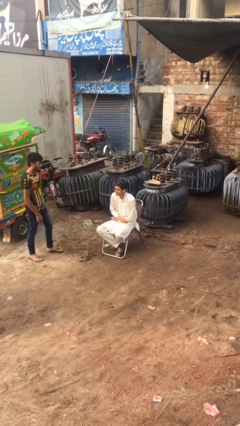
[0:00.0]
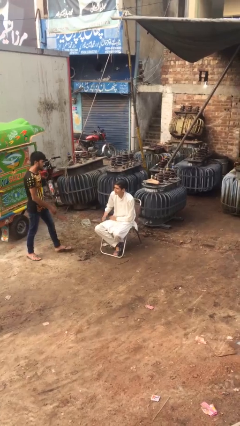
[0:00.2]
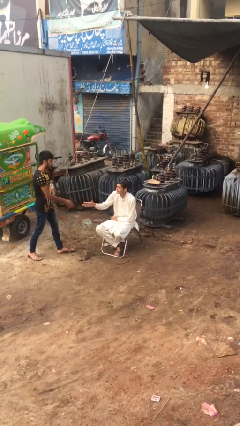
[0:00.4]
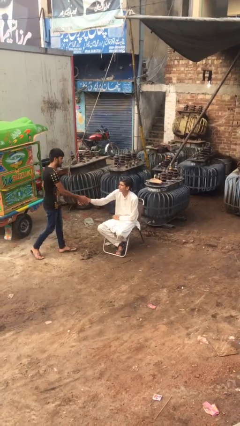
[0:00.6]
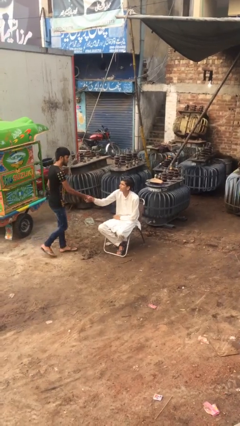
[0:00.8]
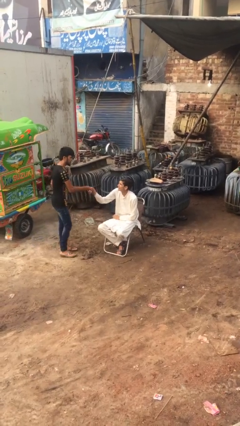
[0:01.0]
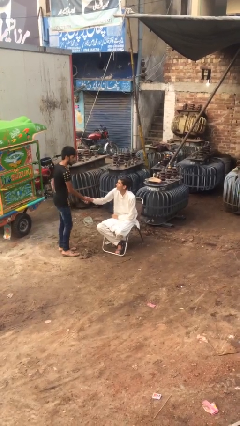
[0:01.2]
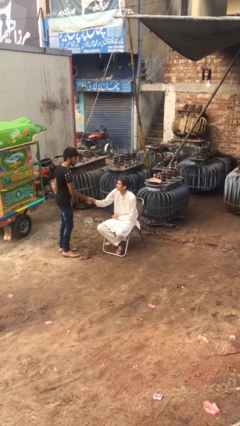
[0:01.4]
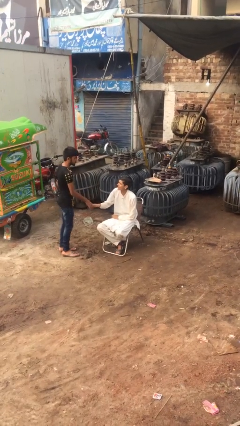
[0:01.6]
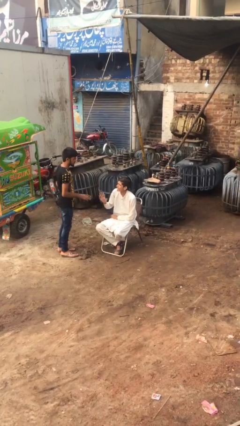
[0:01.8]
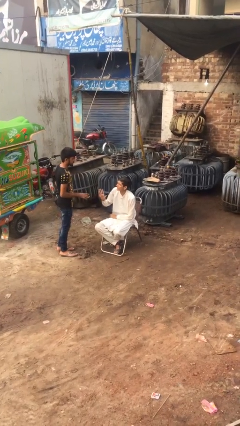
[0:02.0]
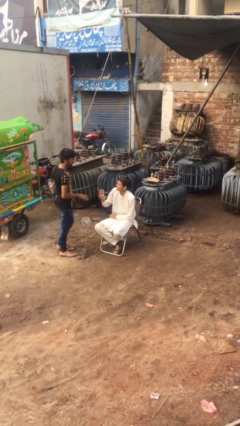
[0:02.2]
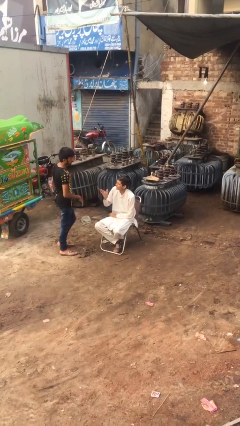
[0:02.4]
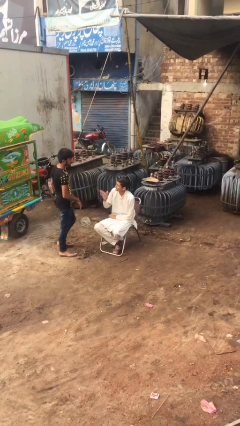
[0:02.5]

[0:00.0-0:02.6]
person shakes hand

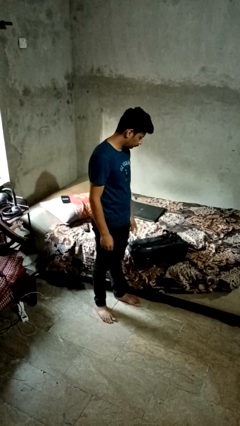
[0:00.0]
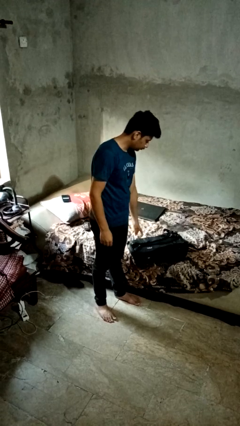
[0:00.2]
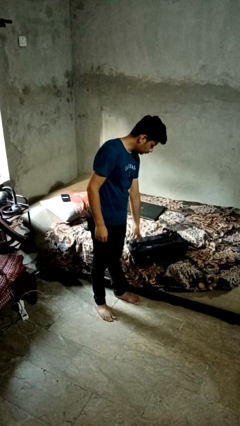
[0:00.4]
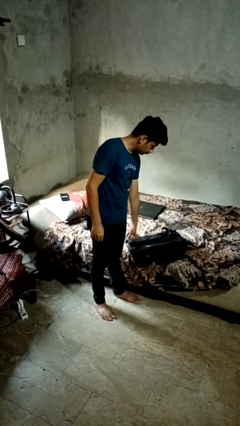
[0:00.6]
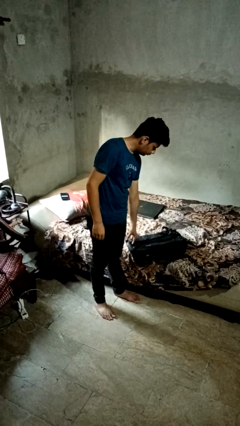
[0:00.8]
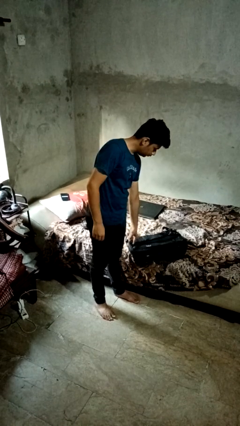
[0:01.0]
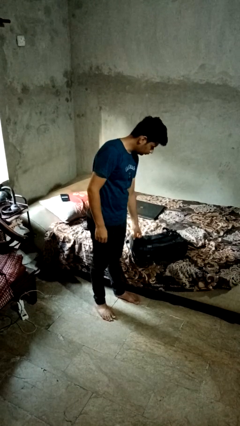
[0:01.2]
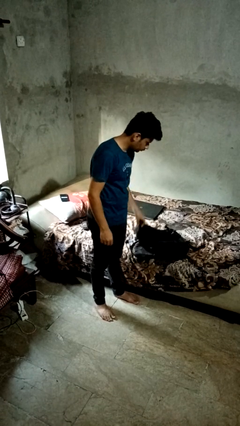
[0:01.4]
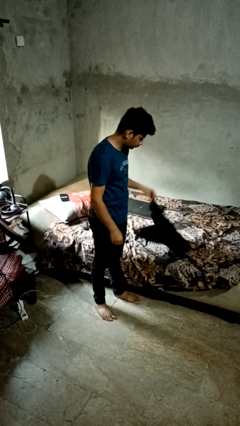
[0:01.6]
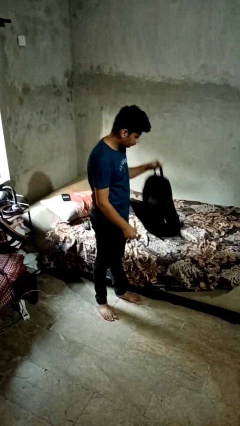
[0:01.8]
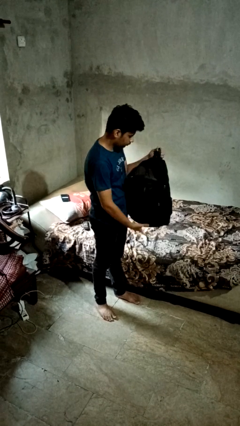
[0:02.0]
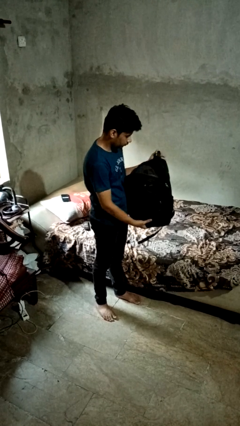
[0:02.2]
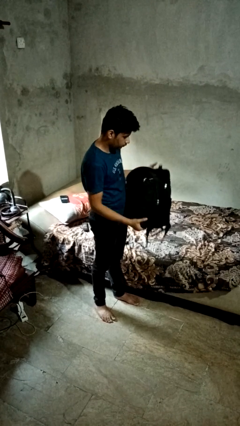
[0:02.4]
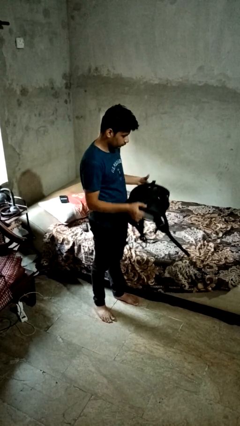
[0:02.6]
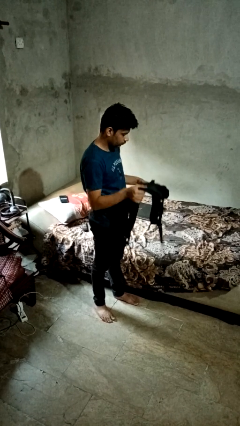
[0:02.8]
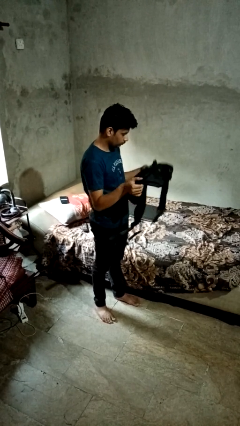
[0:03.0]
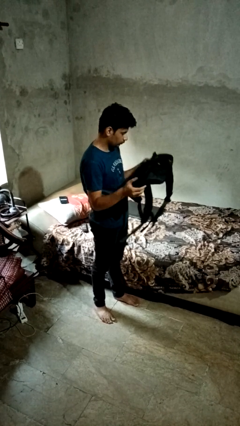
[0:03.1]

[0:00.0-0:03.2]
person picks up object from bed

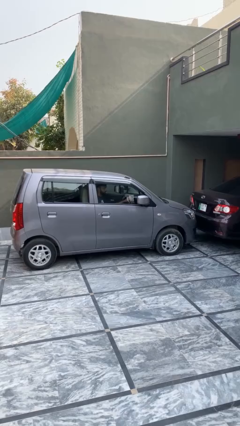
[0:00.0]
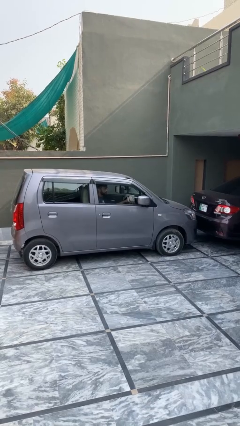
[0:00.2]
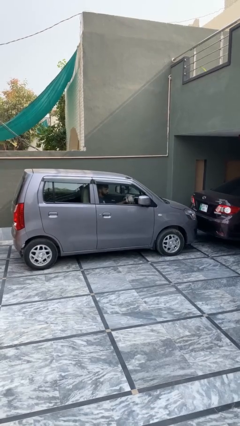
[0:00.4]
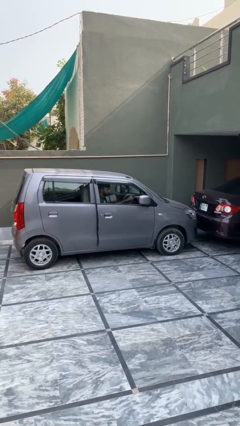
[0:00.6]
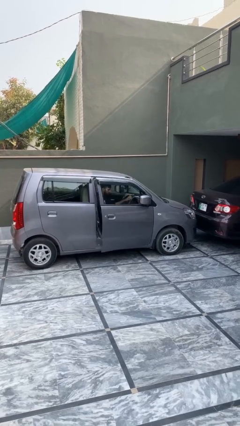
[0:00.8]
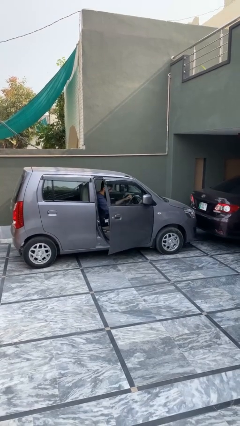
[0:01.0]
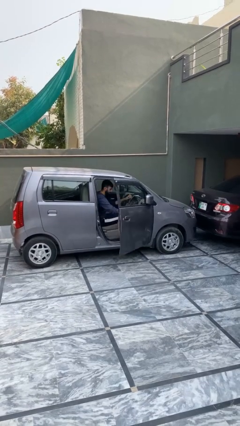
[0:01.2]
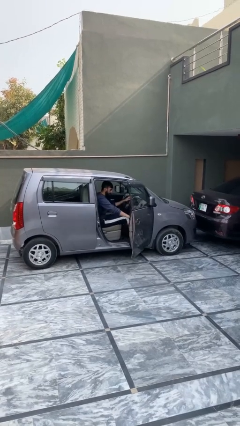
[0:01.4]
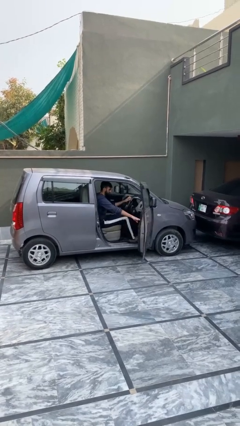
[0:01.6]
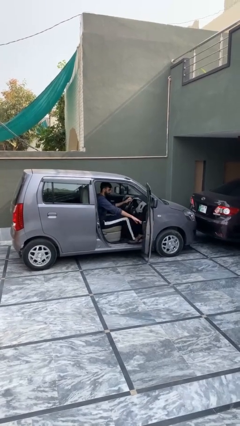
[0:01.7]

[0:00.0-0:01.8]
person opens car door

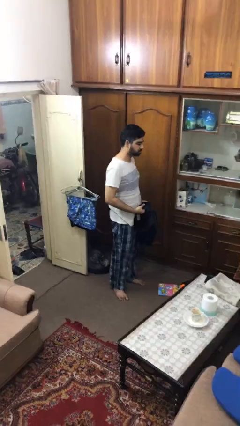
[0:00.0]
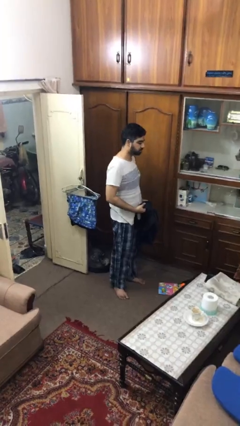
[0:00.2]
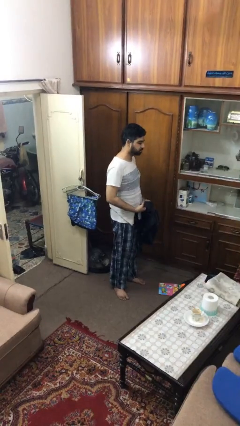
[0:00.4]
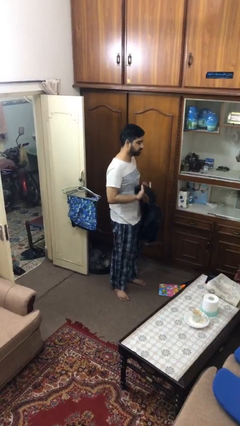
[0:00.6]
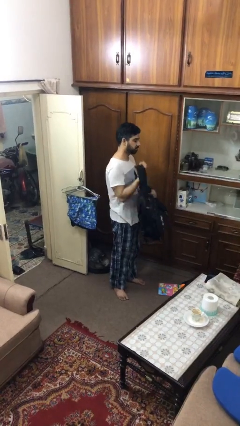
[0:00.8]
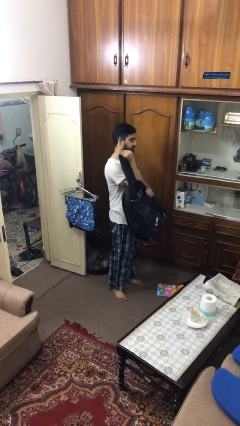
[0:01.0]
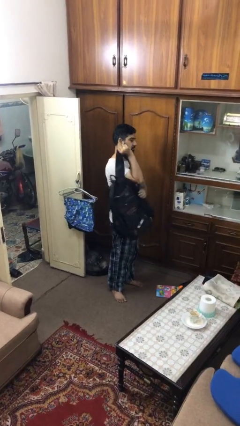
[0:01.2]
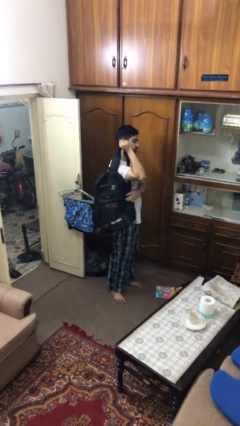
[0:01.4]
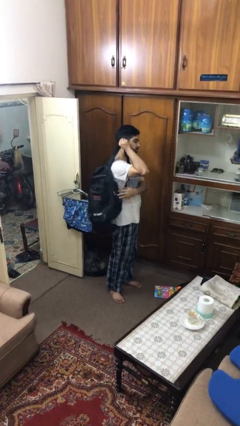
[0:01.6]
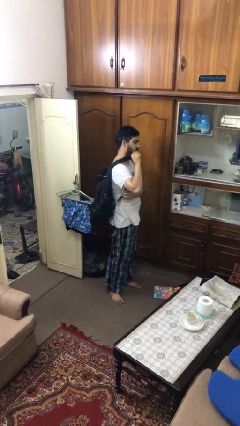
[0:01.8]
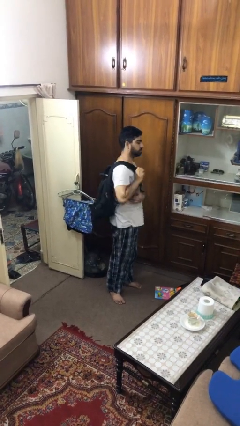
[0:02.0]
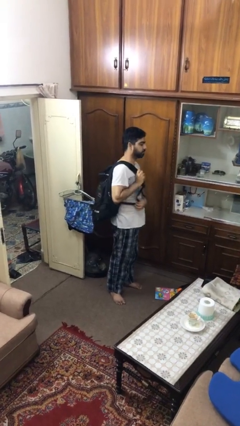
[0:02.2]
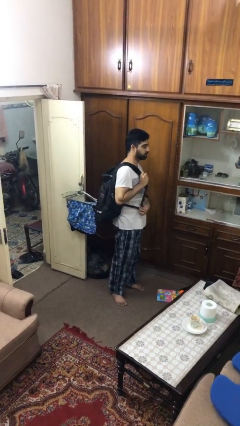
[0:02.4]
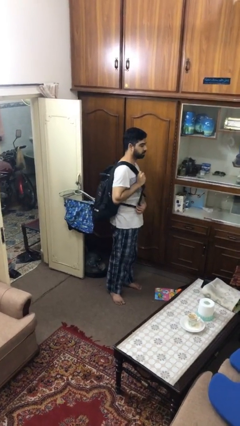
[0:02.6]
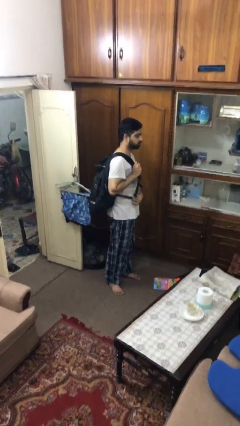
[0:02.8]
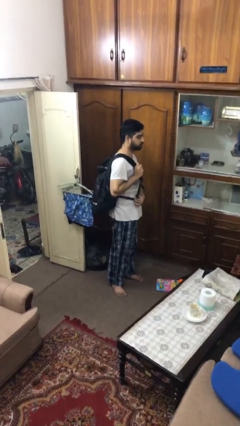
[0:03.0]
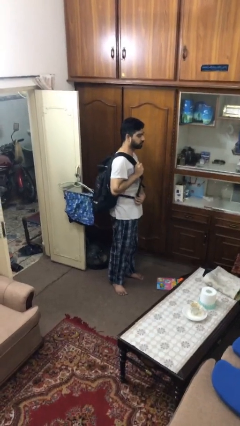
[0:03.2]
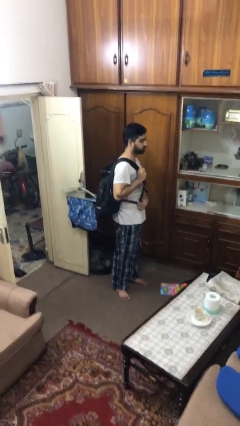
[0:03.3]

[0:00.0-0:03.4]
person puts on backpack

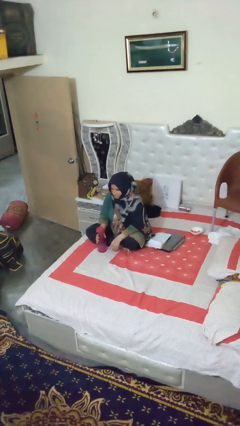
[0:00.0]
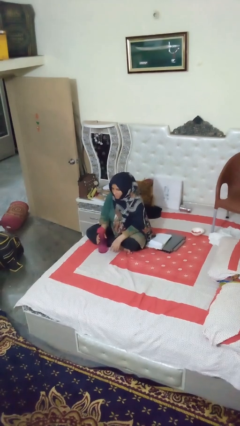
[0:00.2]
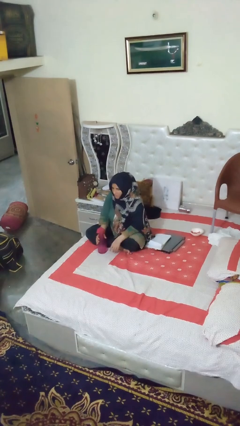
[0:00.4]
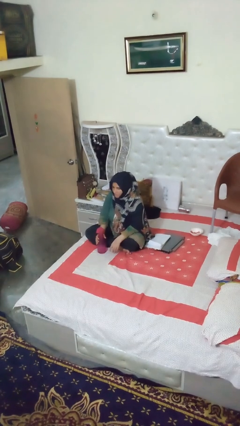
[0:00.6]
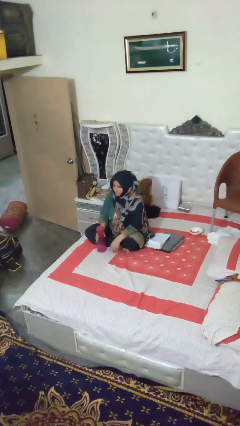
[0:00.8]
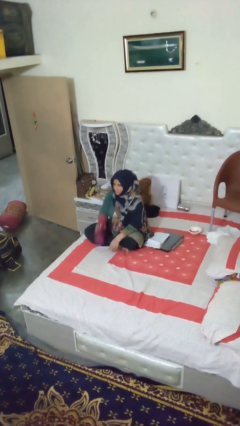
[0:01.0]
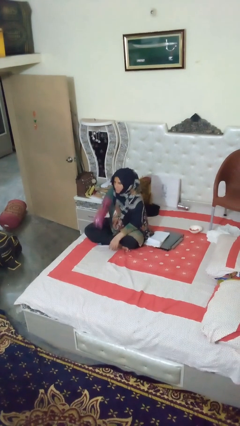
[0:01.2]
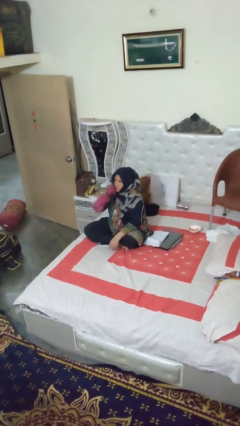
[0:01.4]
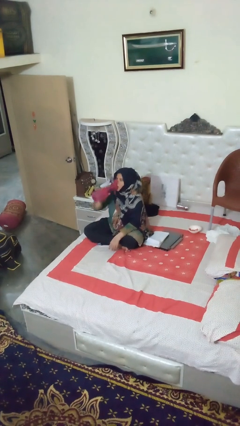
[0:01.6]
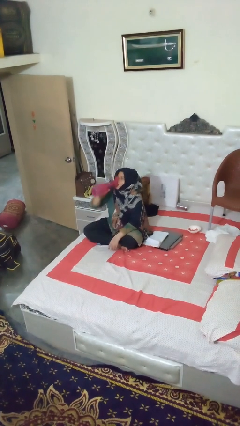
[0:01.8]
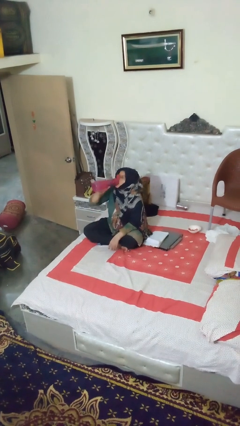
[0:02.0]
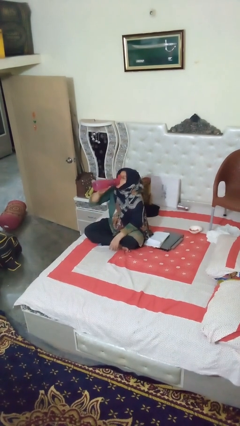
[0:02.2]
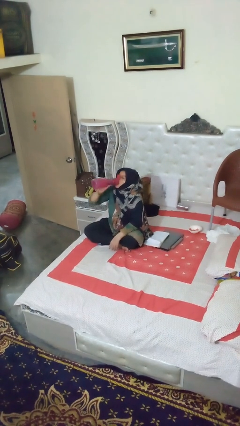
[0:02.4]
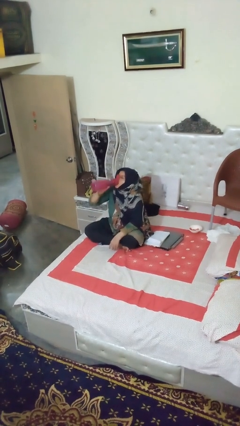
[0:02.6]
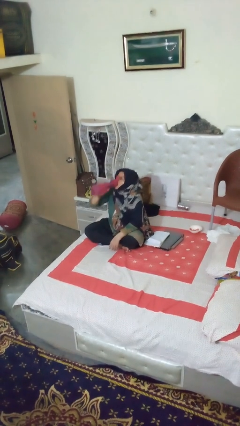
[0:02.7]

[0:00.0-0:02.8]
person drinks from bottle

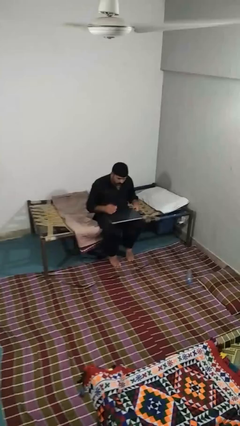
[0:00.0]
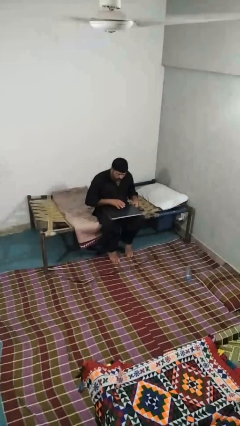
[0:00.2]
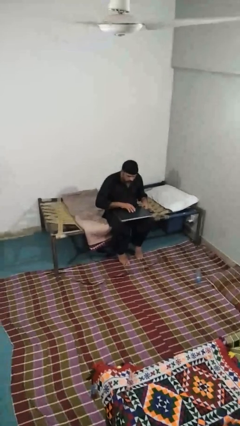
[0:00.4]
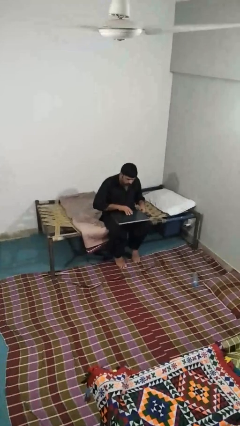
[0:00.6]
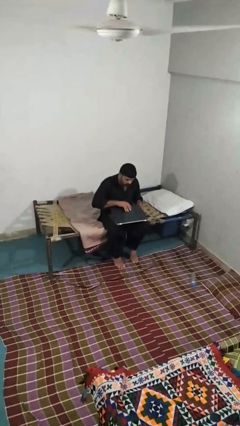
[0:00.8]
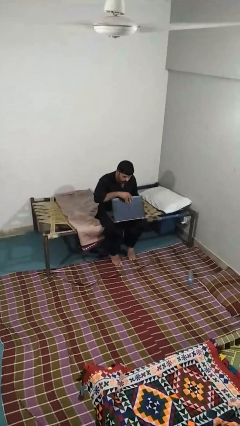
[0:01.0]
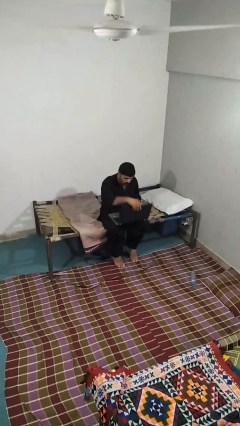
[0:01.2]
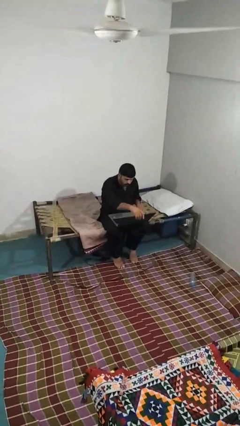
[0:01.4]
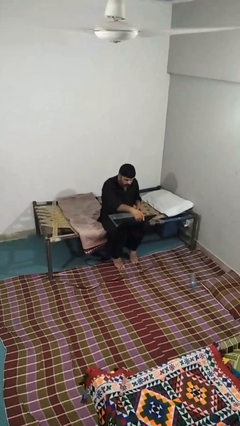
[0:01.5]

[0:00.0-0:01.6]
person opens laptop

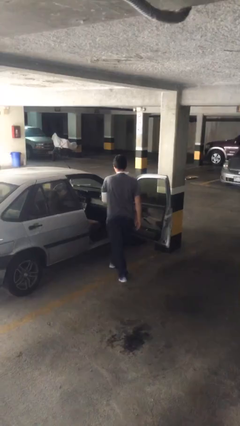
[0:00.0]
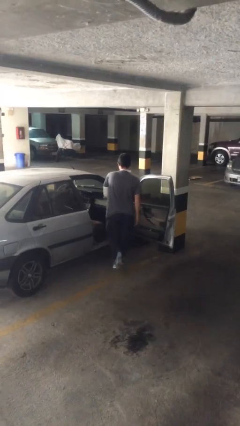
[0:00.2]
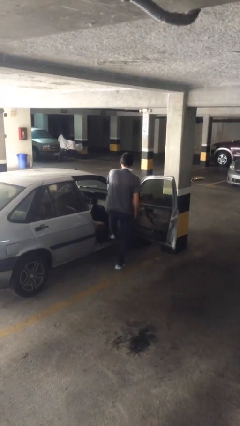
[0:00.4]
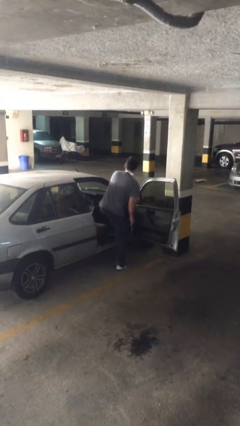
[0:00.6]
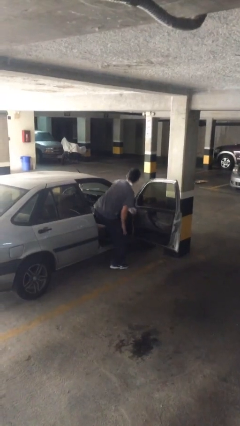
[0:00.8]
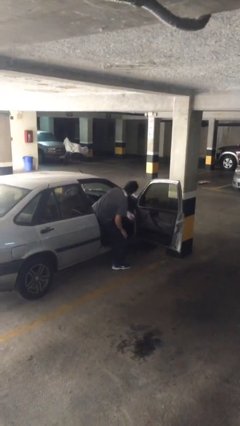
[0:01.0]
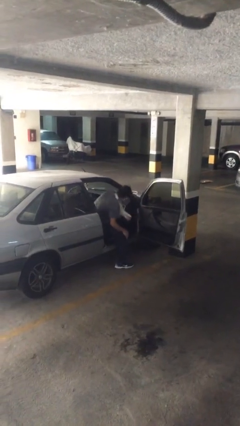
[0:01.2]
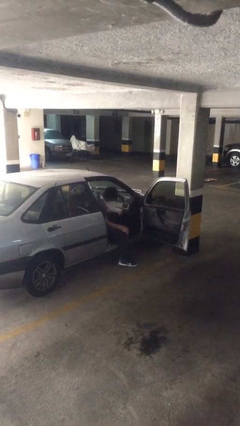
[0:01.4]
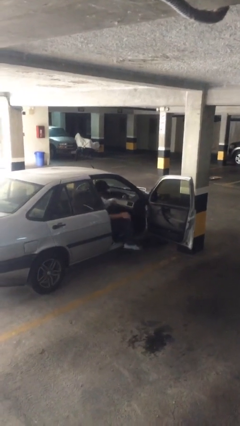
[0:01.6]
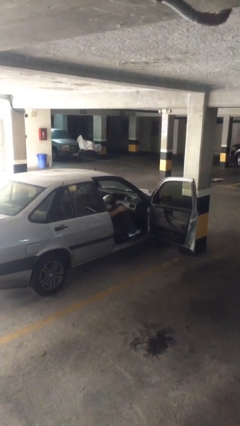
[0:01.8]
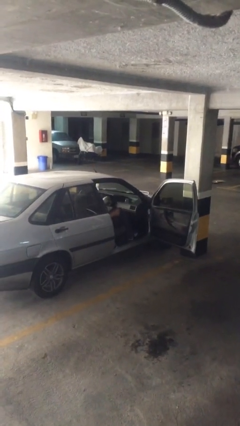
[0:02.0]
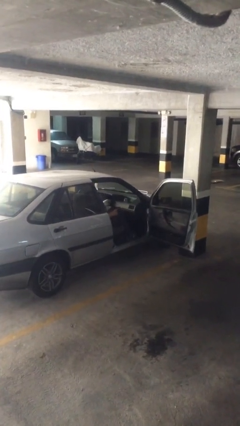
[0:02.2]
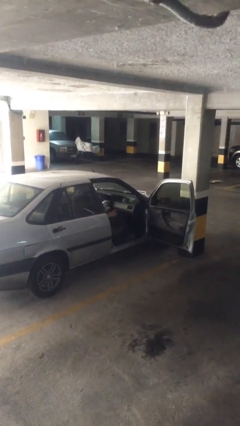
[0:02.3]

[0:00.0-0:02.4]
person enters car
